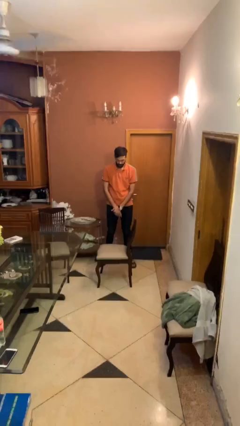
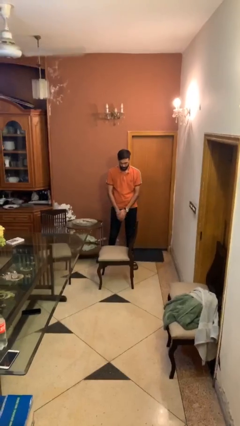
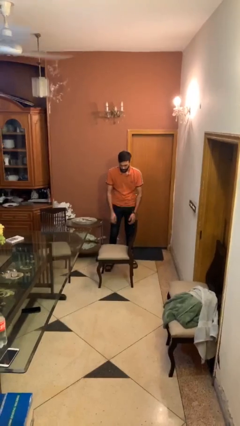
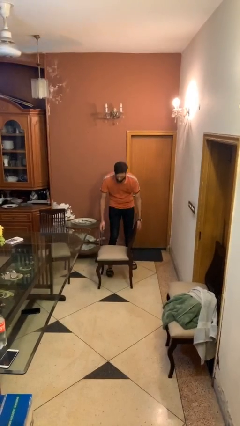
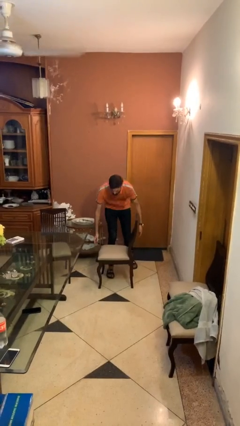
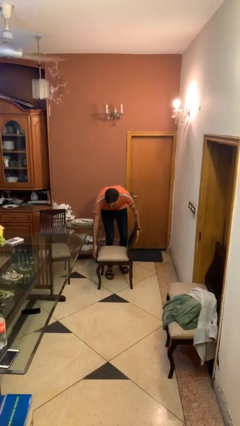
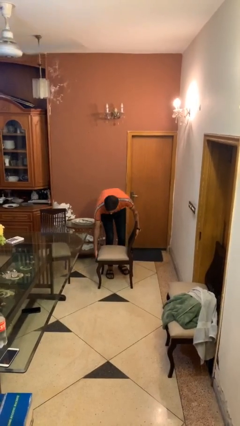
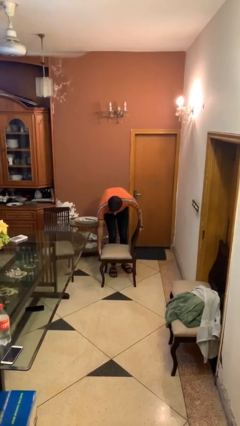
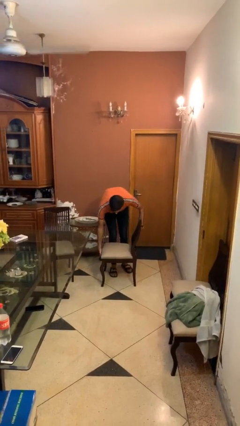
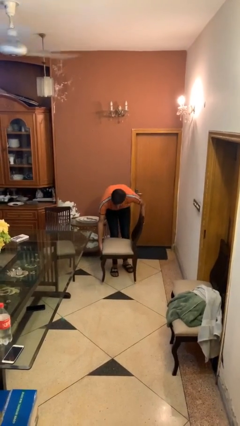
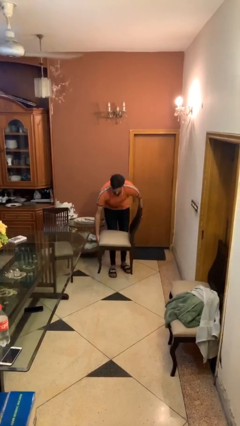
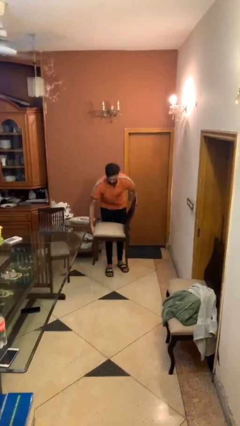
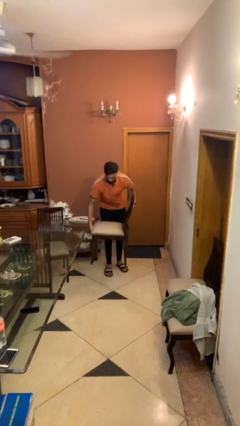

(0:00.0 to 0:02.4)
person picks up object from floor

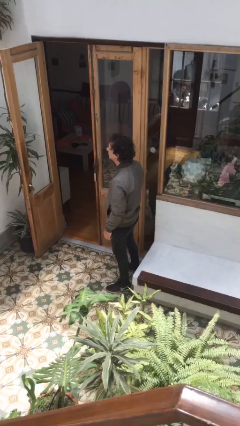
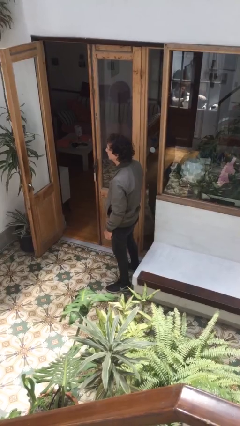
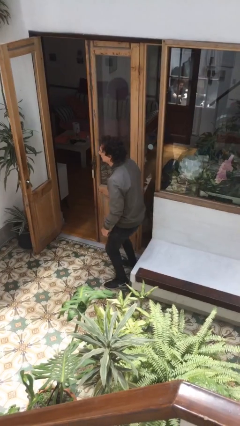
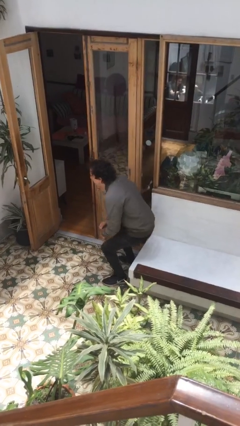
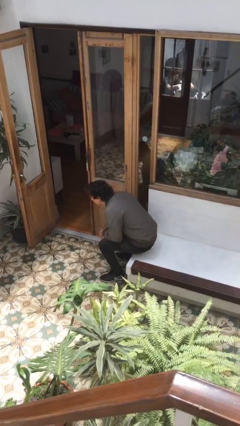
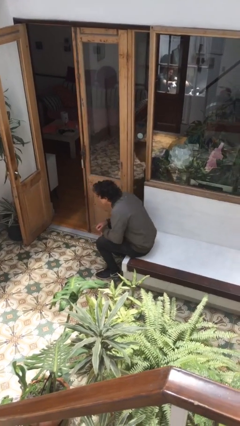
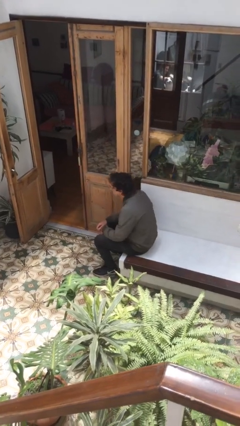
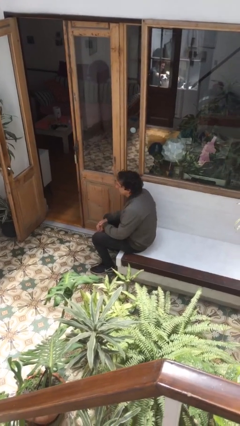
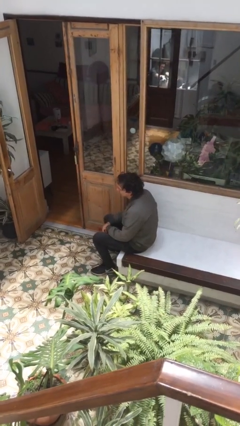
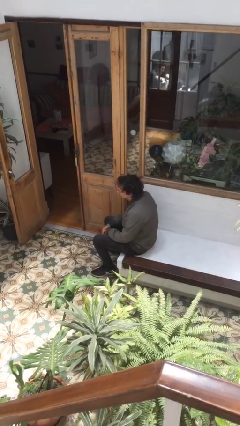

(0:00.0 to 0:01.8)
person sits down

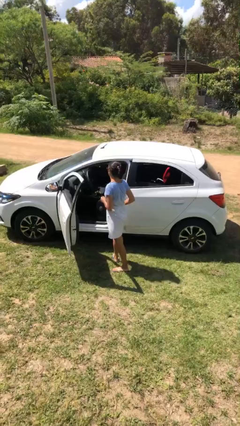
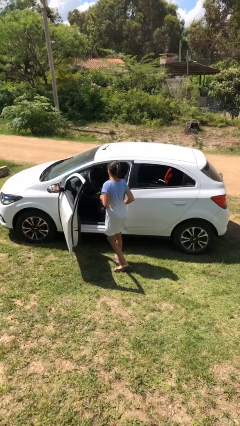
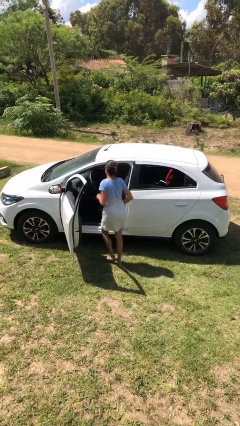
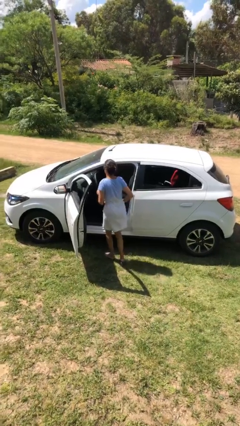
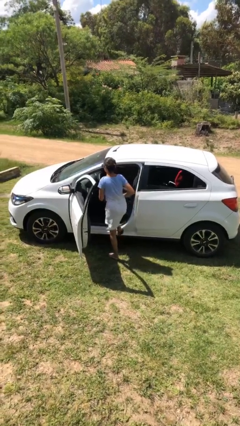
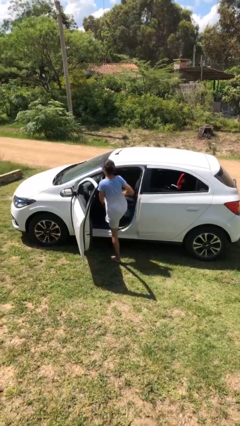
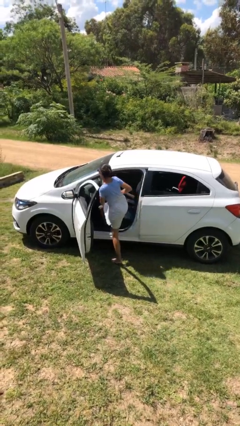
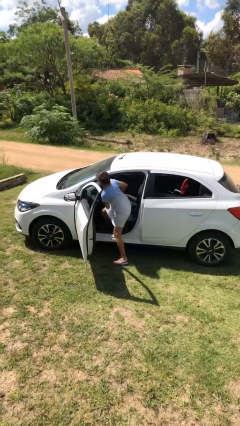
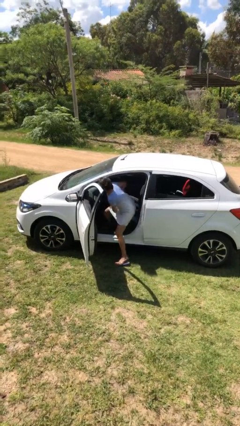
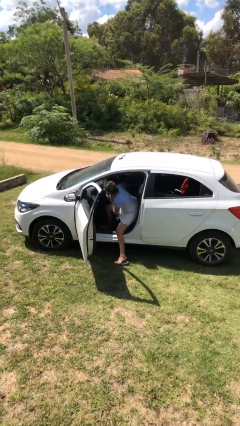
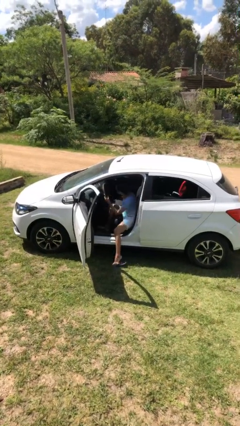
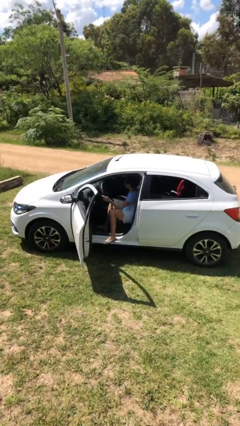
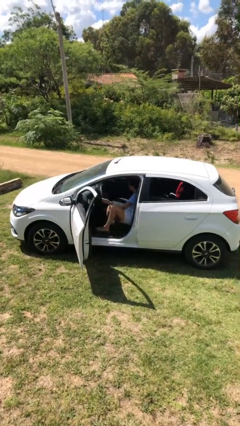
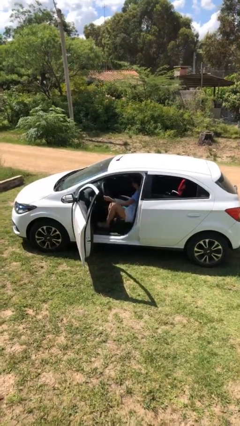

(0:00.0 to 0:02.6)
person enters car

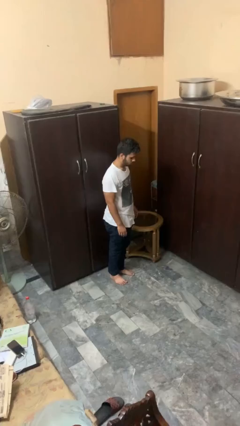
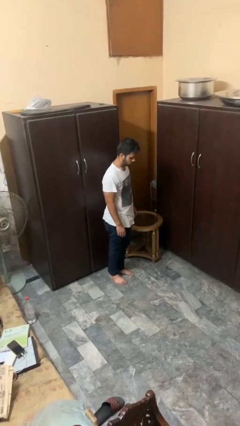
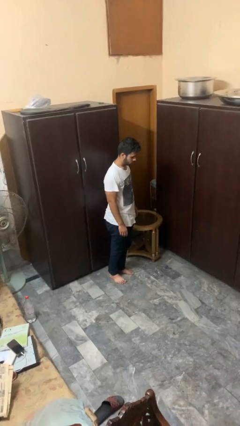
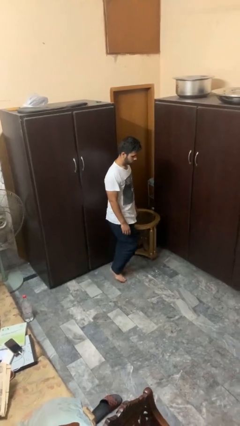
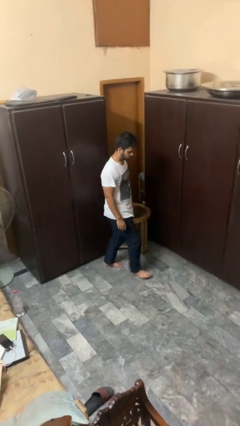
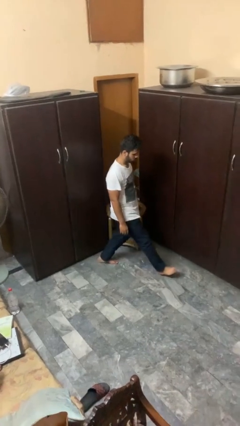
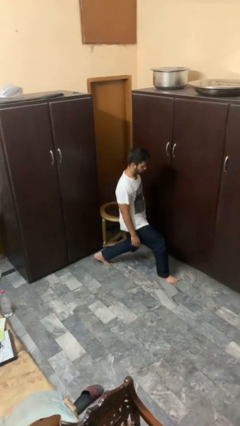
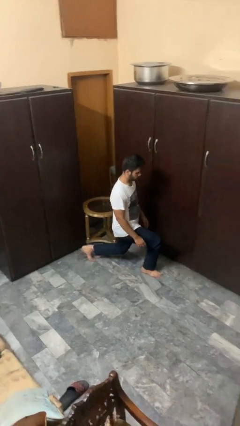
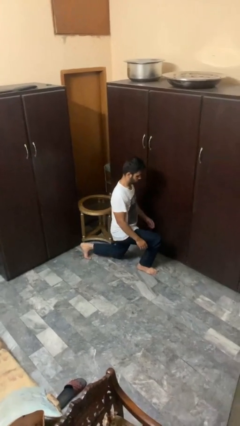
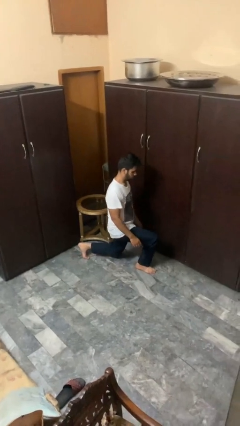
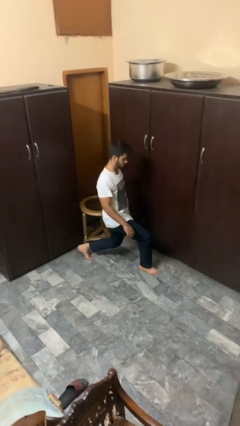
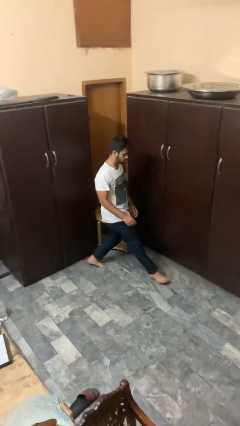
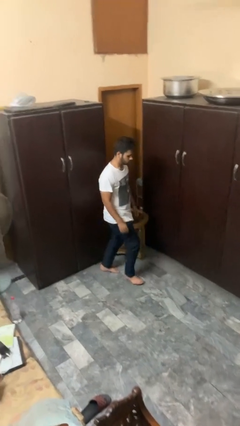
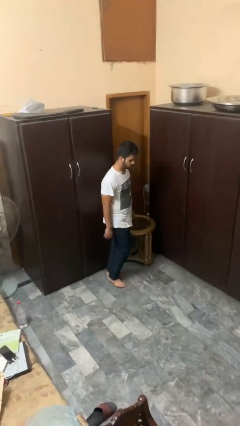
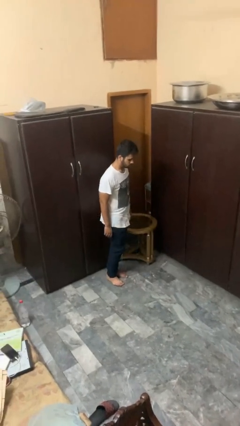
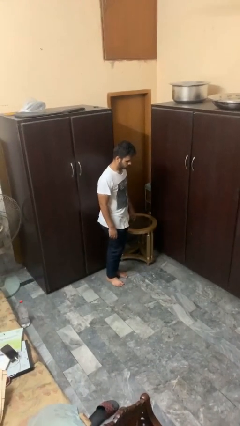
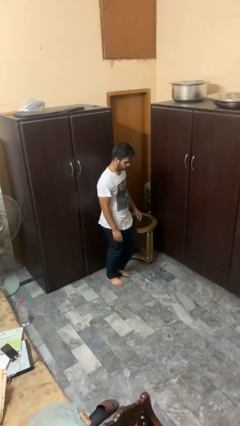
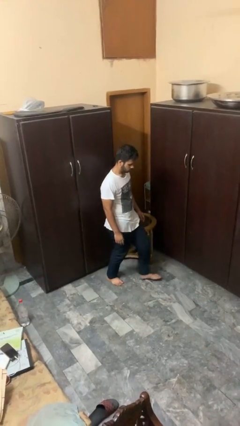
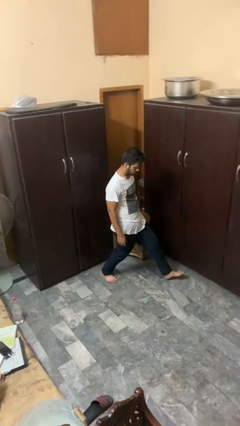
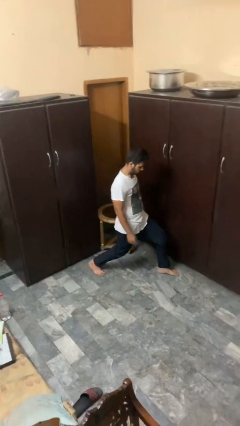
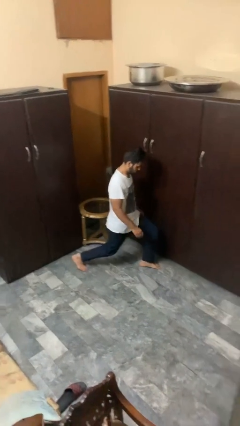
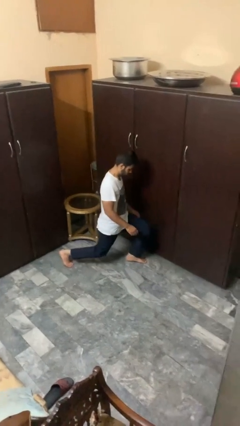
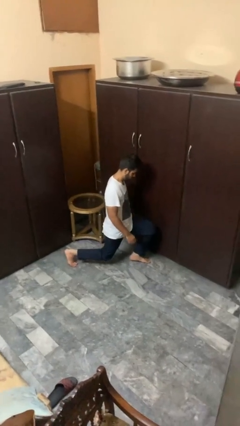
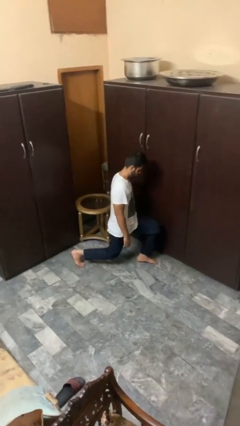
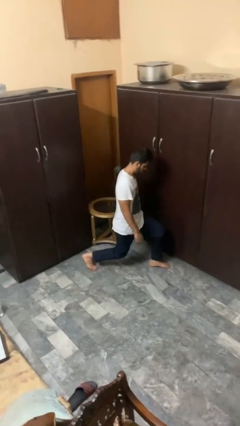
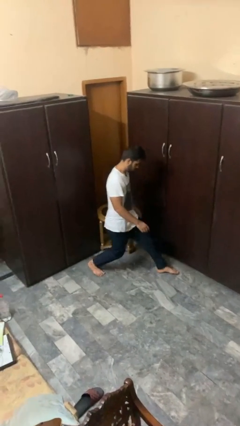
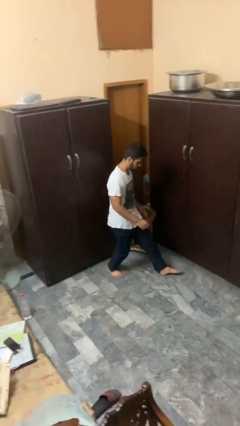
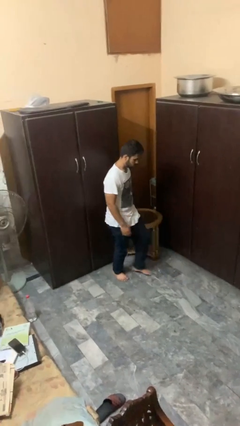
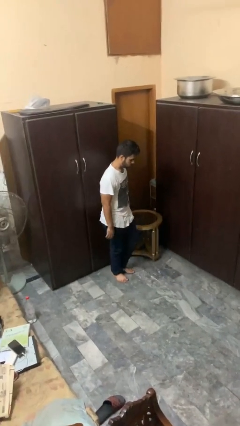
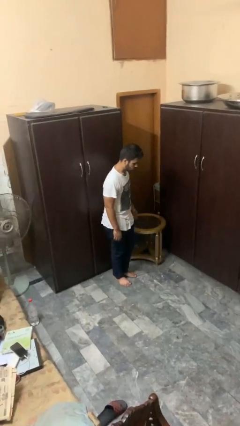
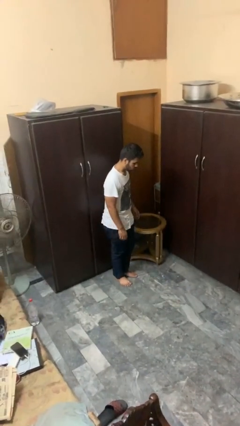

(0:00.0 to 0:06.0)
person exercises with lunges

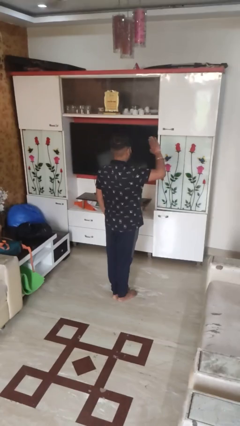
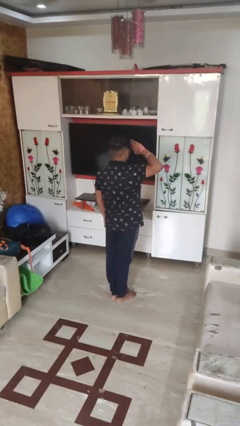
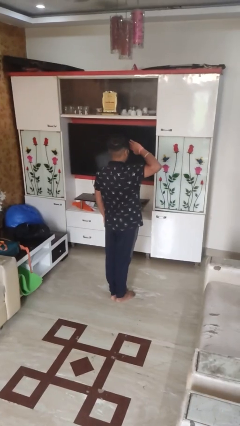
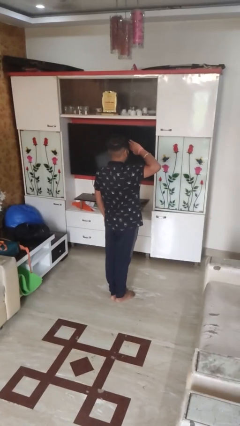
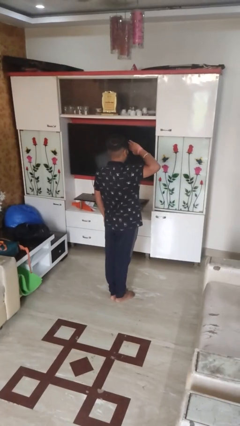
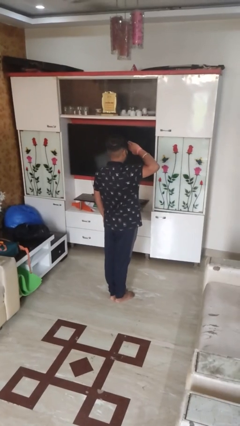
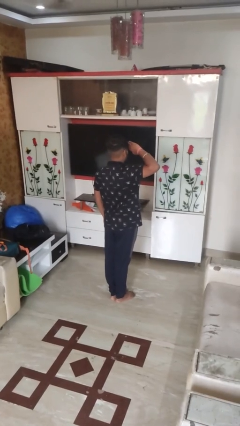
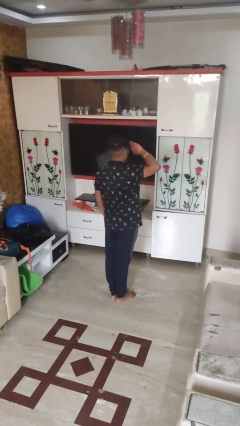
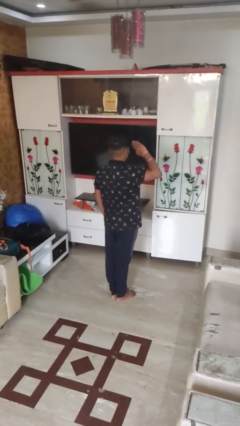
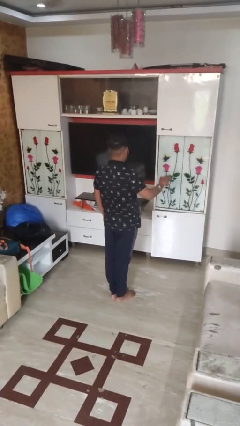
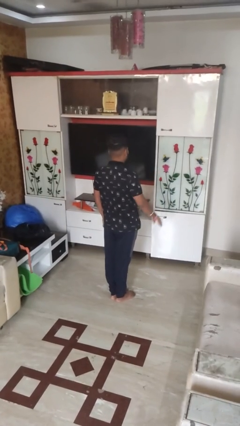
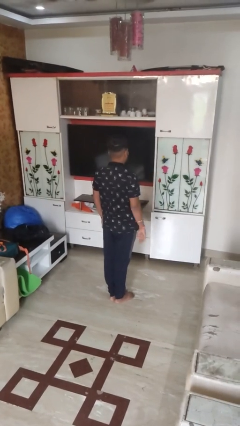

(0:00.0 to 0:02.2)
person salutes

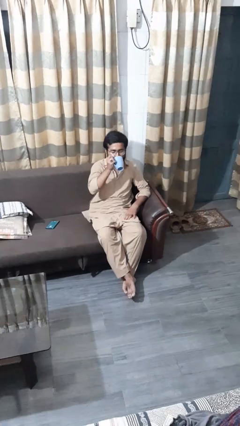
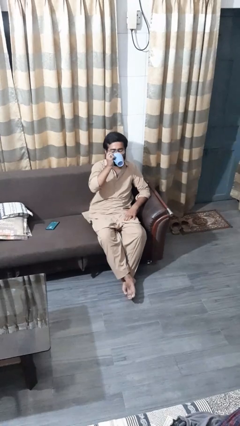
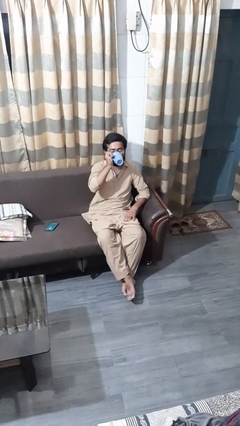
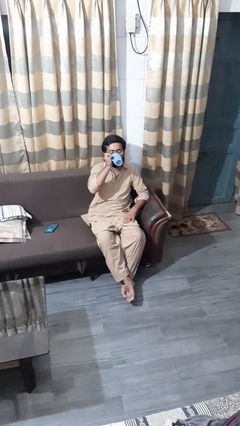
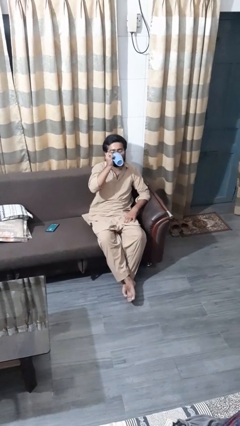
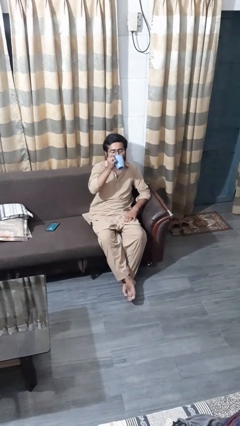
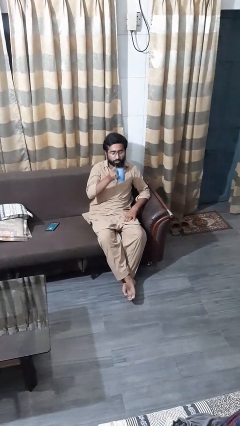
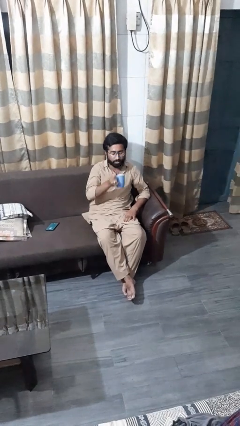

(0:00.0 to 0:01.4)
person drinks from mug

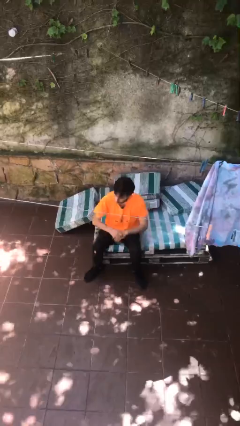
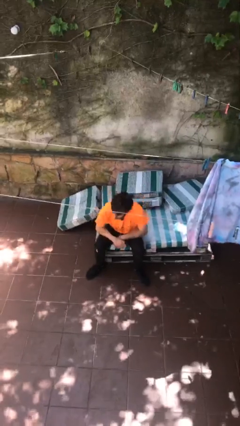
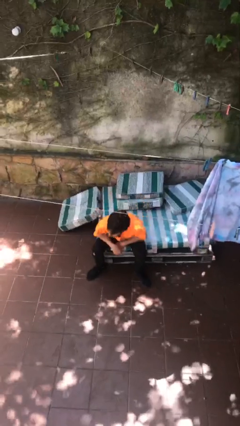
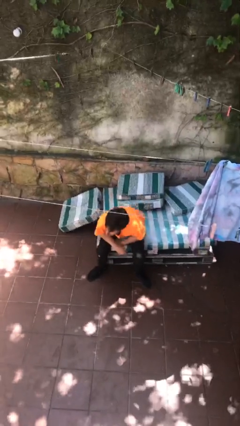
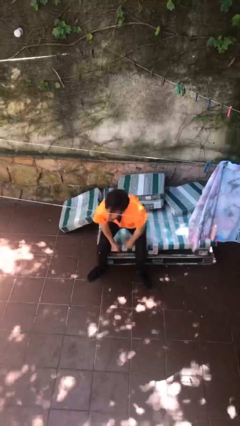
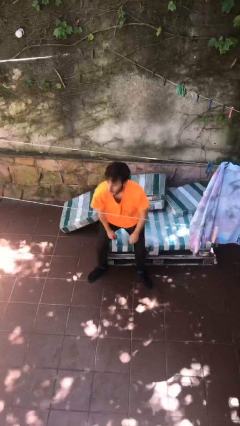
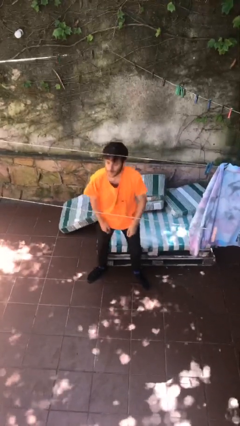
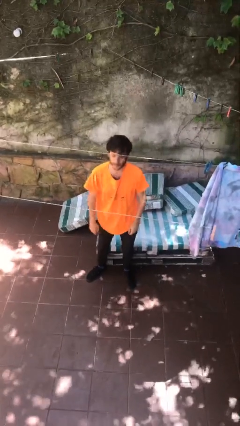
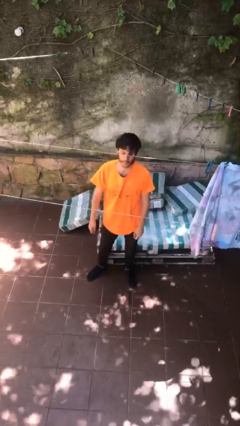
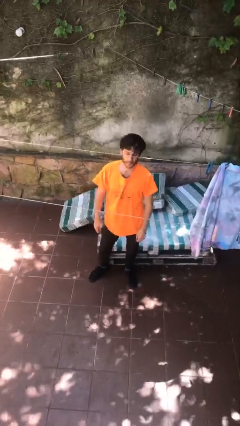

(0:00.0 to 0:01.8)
person stands up
